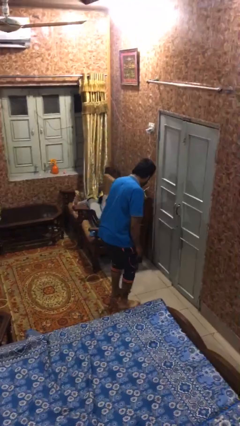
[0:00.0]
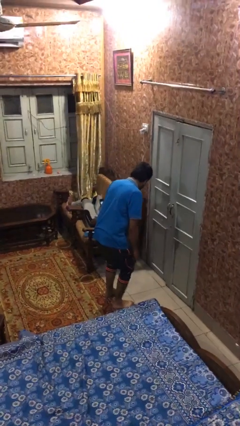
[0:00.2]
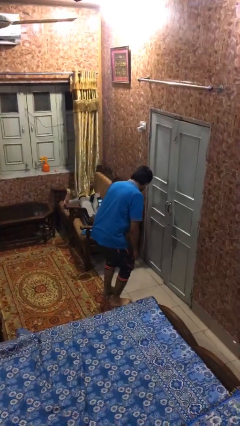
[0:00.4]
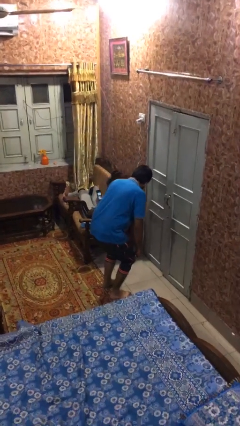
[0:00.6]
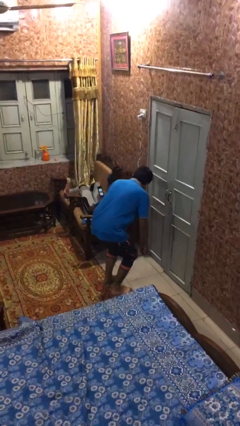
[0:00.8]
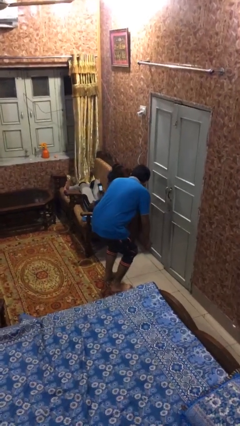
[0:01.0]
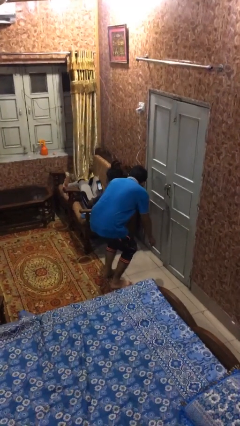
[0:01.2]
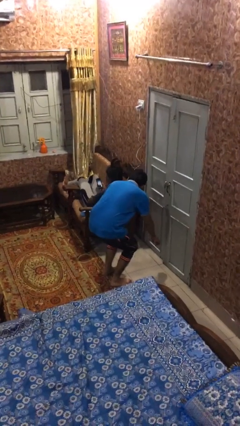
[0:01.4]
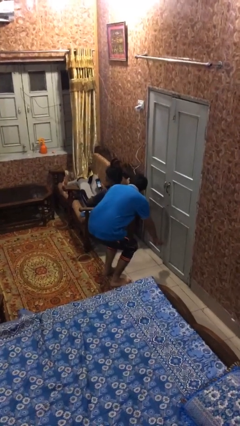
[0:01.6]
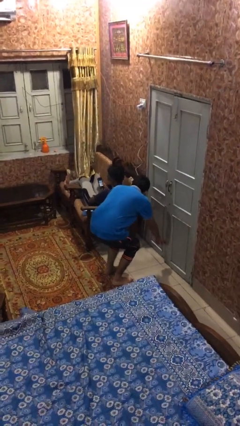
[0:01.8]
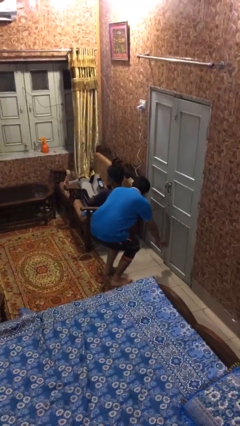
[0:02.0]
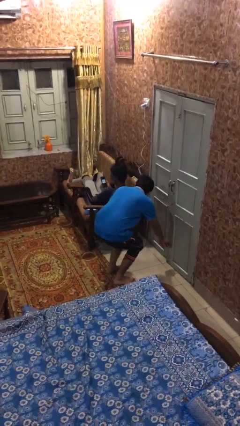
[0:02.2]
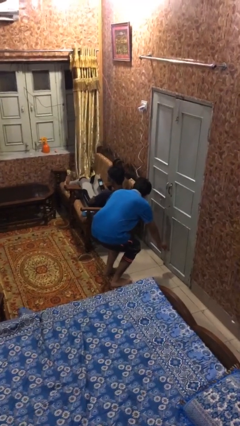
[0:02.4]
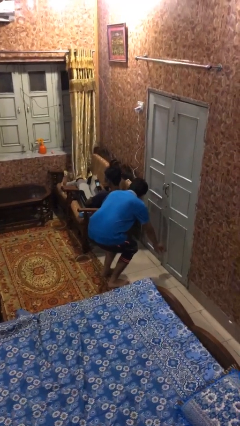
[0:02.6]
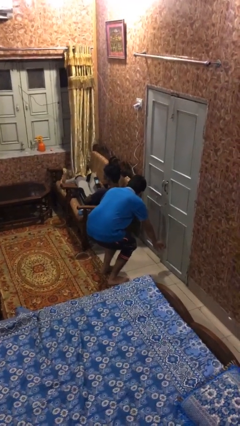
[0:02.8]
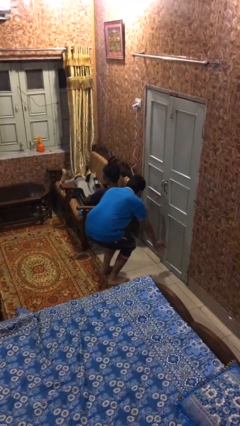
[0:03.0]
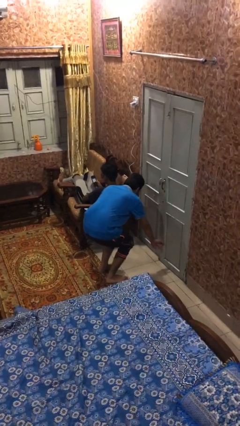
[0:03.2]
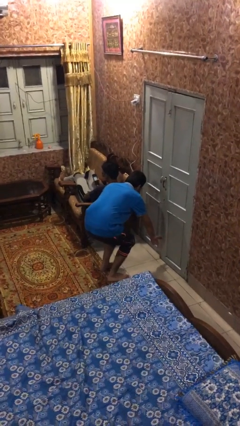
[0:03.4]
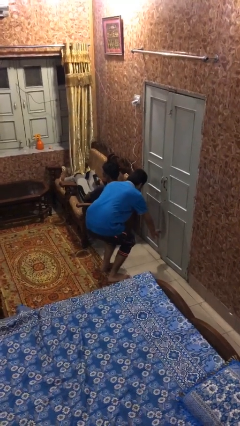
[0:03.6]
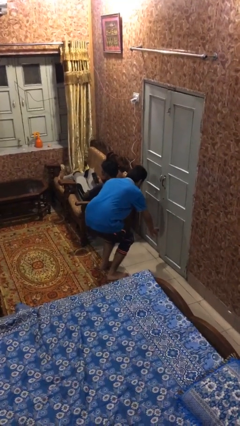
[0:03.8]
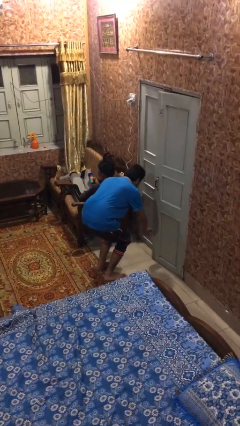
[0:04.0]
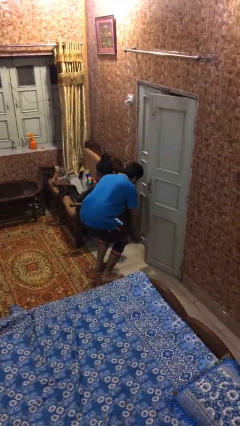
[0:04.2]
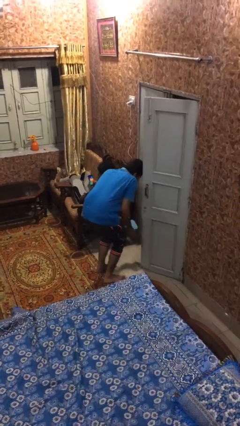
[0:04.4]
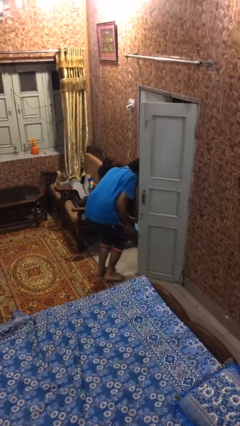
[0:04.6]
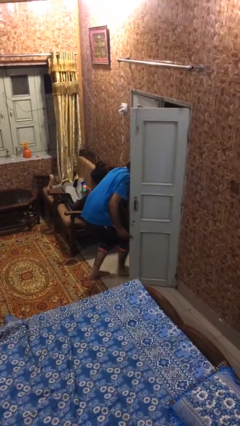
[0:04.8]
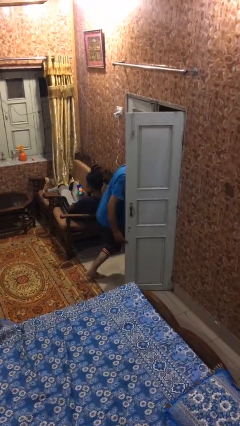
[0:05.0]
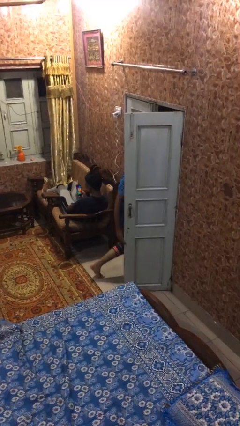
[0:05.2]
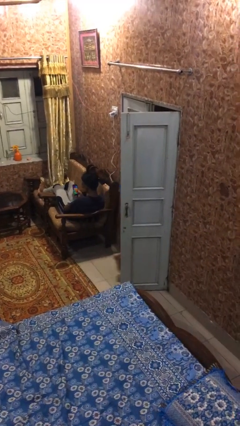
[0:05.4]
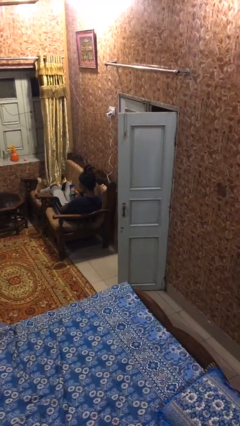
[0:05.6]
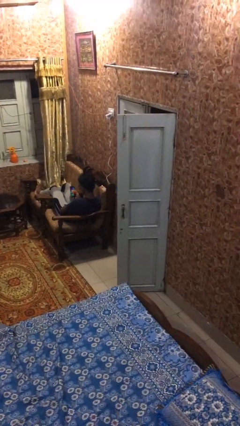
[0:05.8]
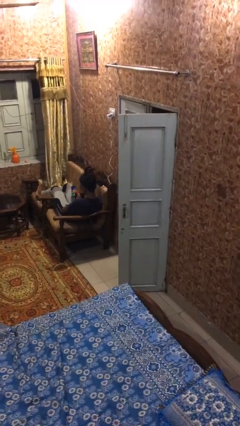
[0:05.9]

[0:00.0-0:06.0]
person steals object from person

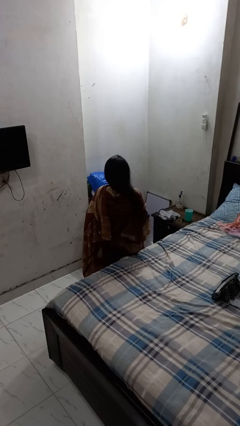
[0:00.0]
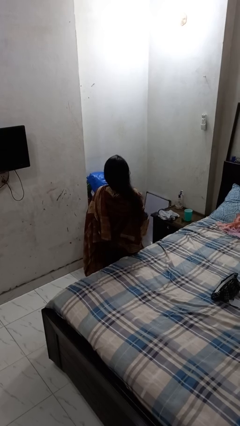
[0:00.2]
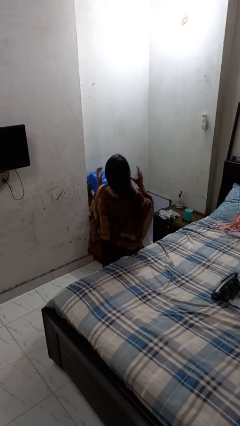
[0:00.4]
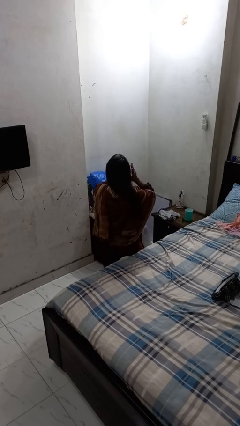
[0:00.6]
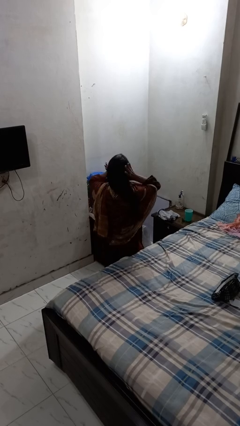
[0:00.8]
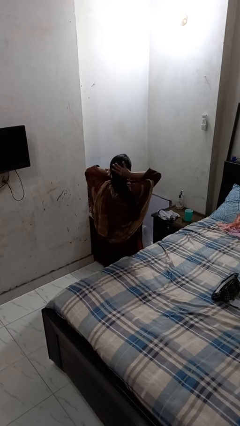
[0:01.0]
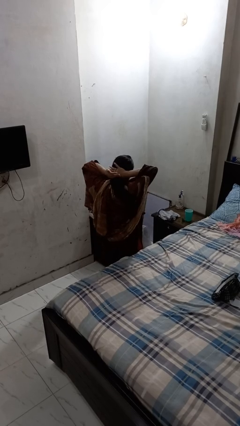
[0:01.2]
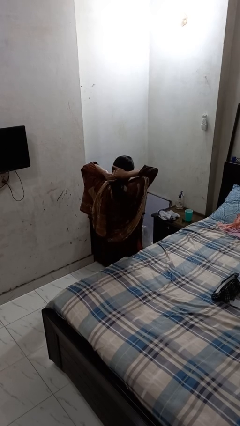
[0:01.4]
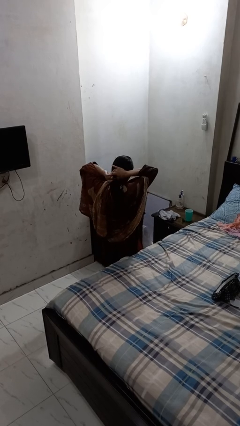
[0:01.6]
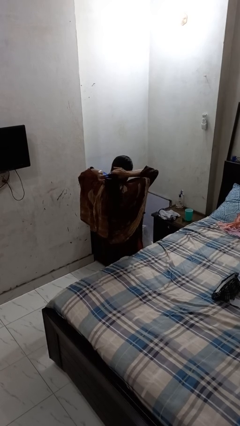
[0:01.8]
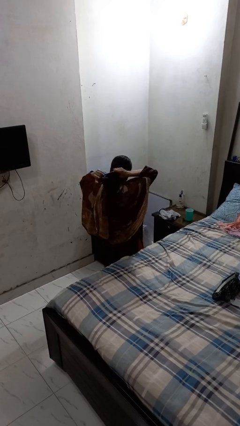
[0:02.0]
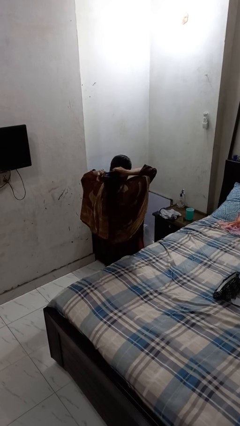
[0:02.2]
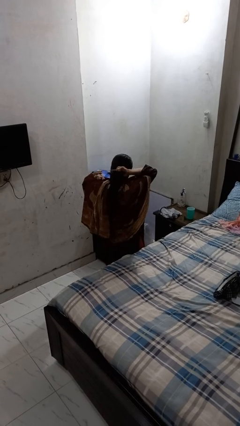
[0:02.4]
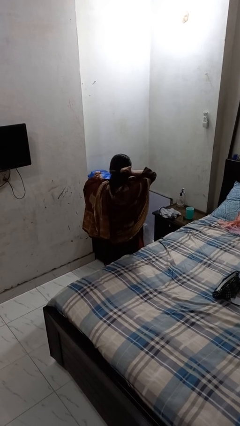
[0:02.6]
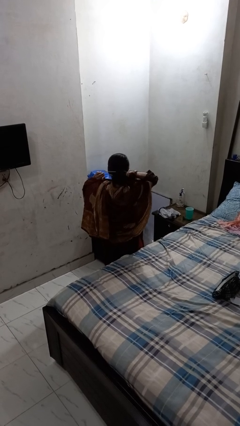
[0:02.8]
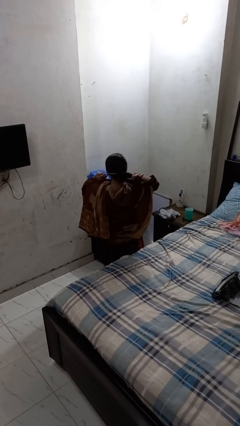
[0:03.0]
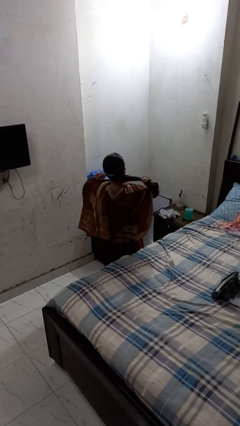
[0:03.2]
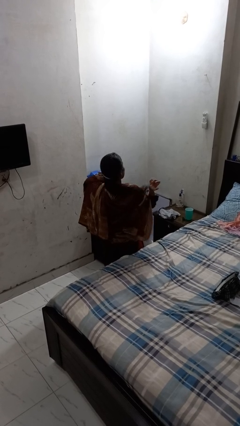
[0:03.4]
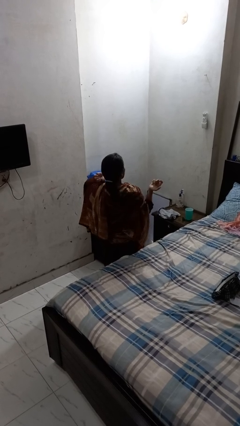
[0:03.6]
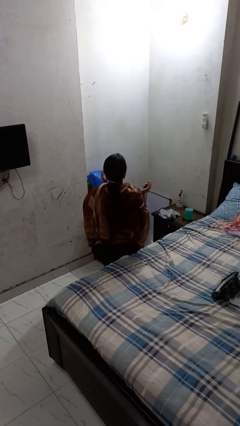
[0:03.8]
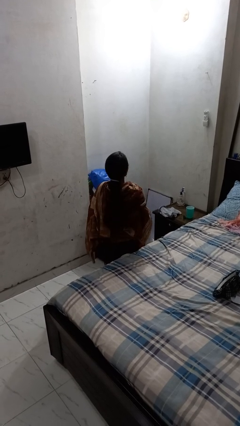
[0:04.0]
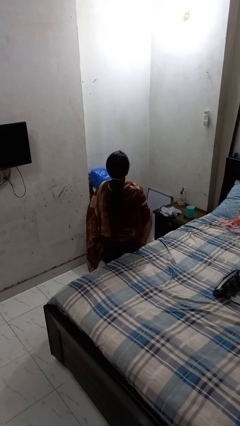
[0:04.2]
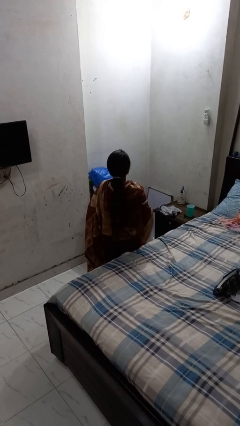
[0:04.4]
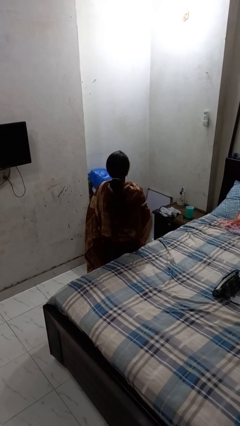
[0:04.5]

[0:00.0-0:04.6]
person puts hair in ponytail

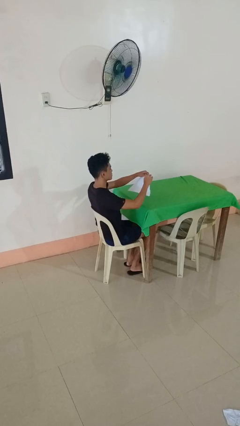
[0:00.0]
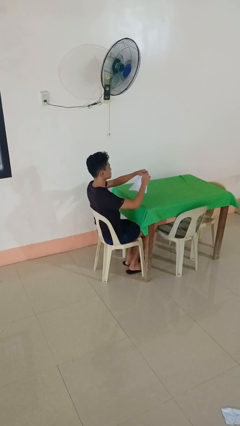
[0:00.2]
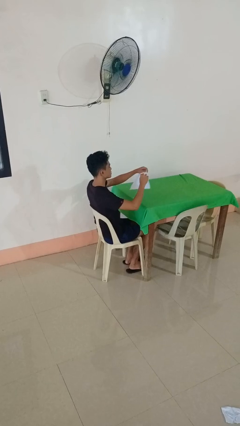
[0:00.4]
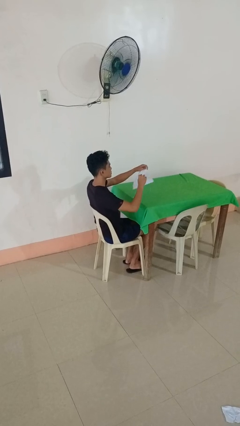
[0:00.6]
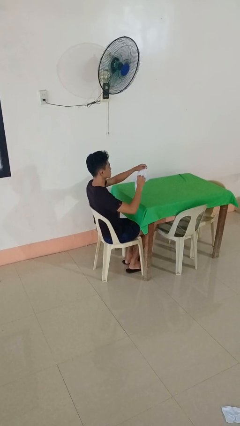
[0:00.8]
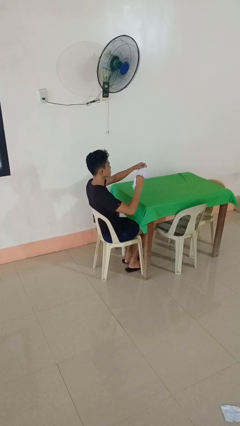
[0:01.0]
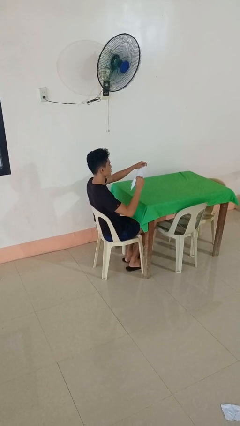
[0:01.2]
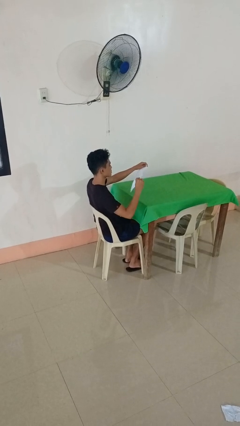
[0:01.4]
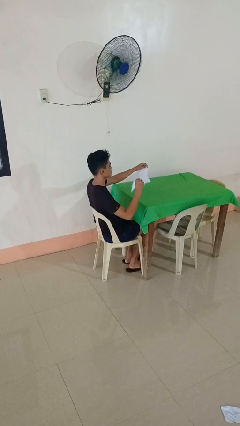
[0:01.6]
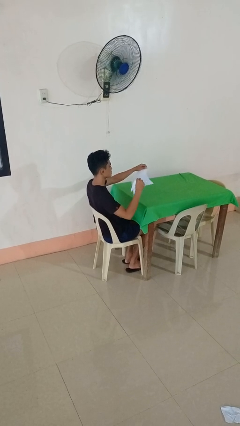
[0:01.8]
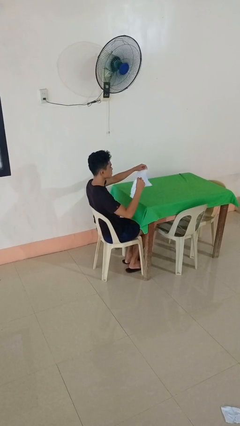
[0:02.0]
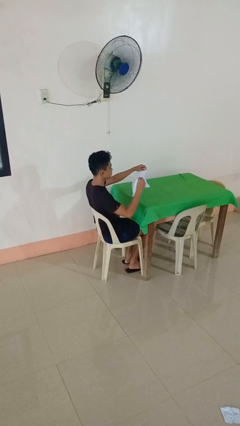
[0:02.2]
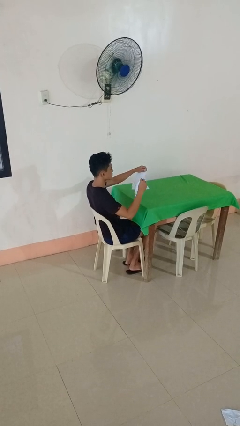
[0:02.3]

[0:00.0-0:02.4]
person tears paper

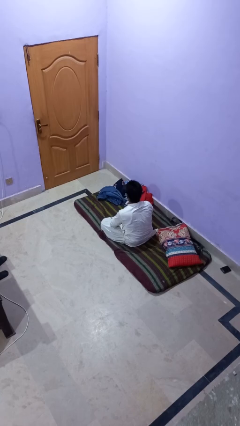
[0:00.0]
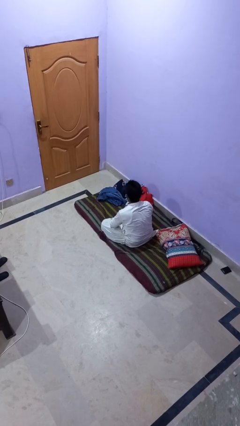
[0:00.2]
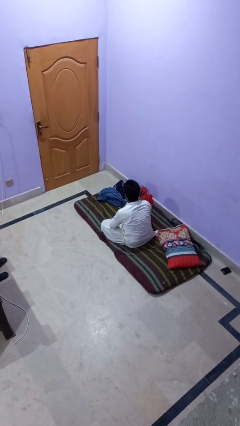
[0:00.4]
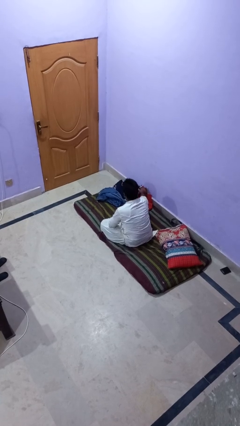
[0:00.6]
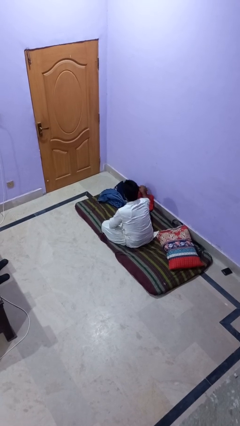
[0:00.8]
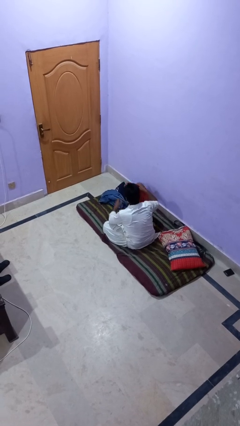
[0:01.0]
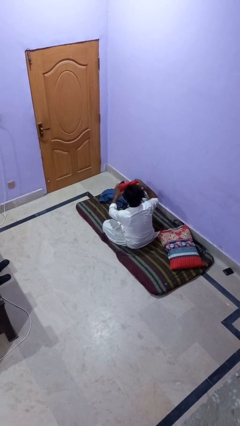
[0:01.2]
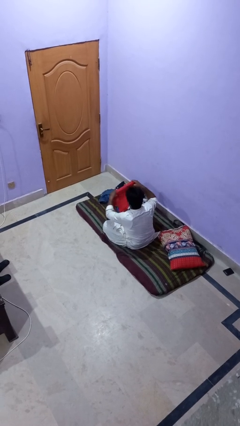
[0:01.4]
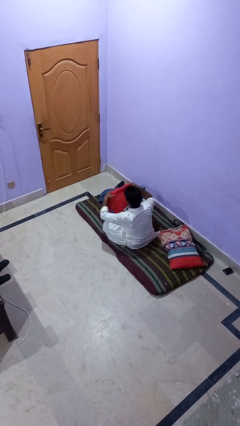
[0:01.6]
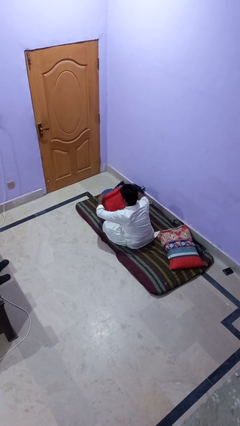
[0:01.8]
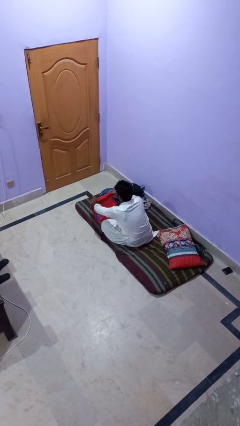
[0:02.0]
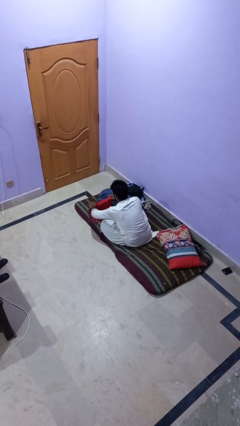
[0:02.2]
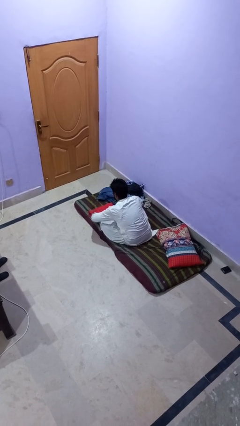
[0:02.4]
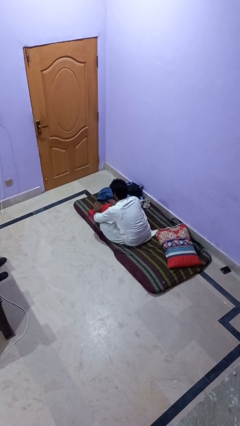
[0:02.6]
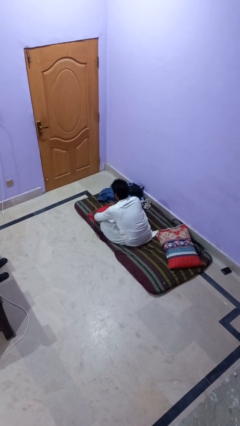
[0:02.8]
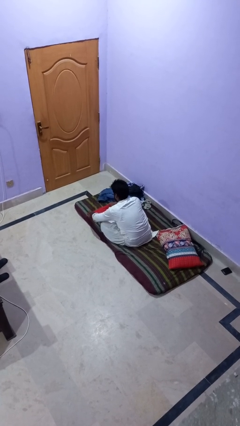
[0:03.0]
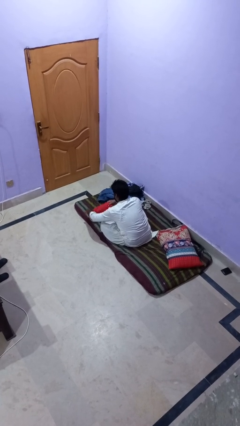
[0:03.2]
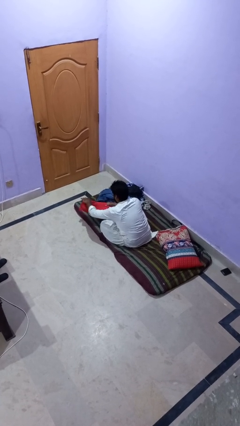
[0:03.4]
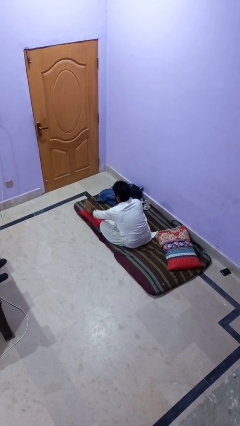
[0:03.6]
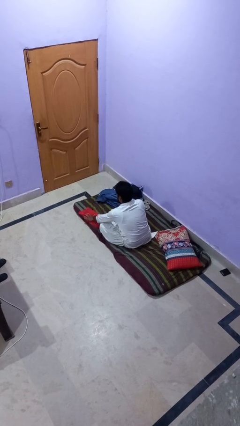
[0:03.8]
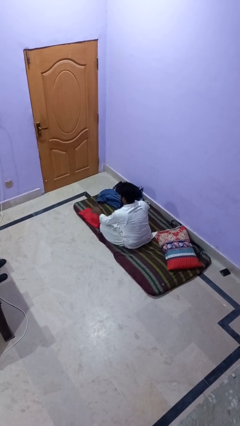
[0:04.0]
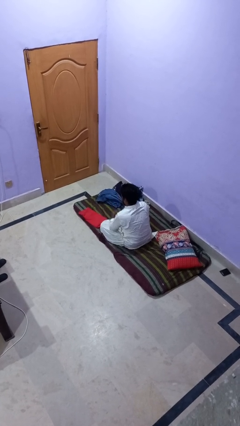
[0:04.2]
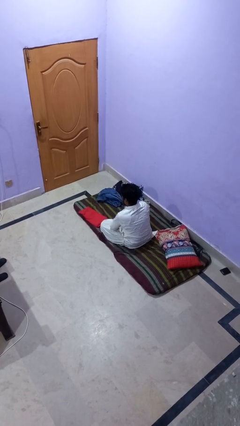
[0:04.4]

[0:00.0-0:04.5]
person folds shirt
